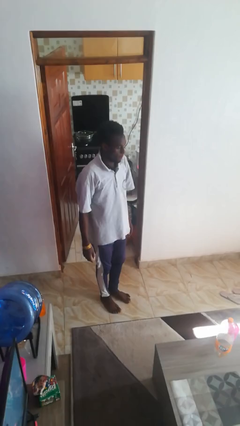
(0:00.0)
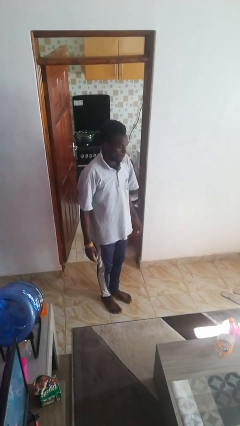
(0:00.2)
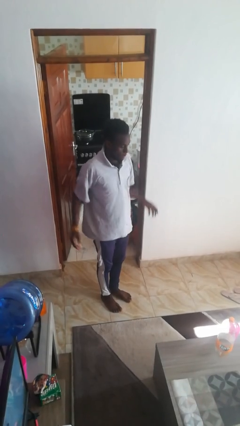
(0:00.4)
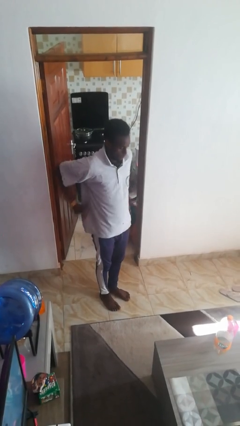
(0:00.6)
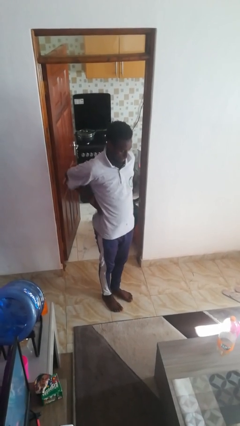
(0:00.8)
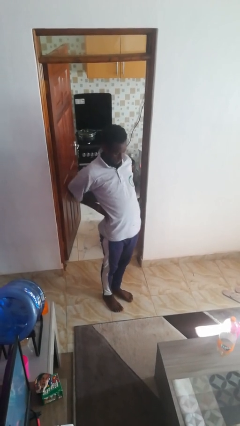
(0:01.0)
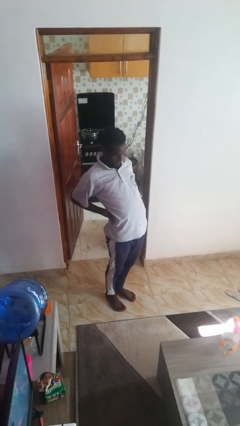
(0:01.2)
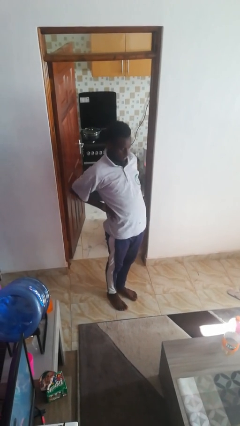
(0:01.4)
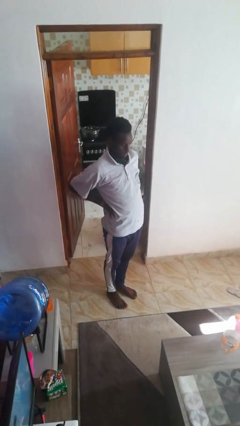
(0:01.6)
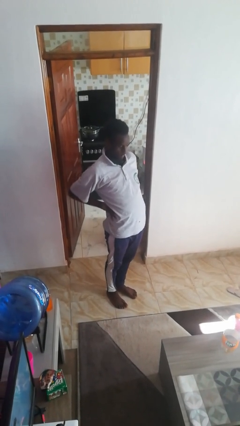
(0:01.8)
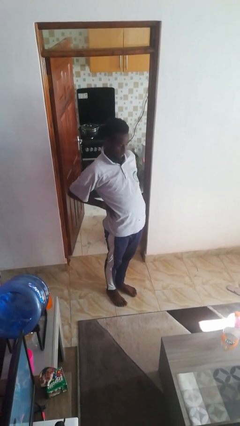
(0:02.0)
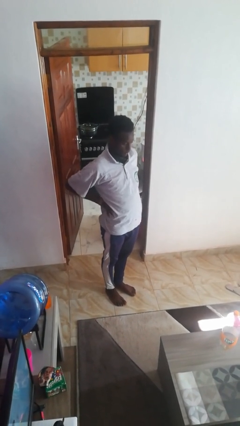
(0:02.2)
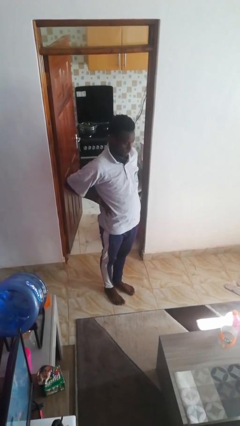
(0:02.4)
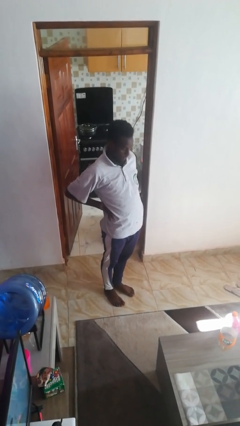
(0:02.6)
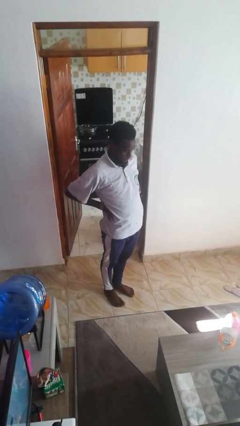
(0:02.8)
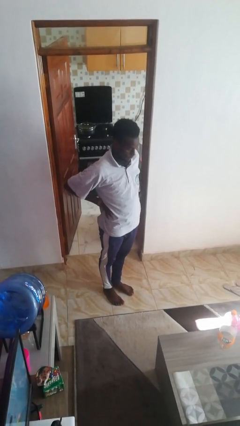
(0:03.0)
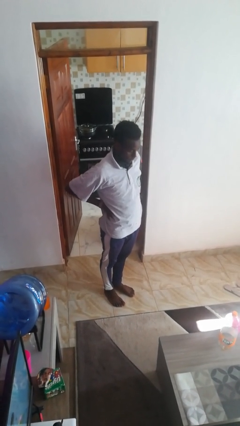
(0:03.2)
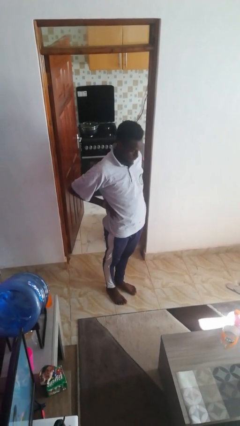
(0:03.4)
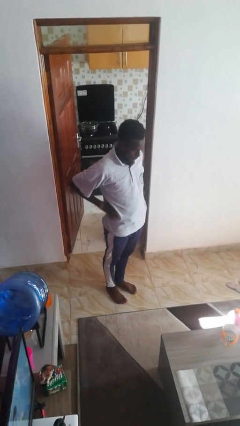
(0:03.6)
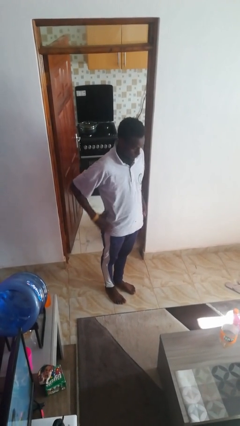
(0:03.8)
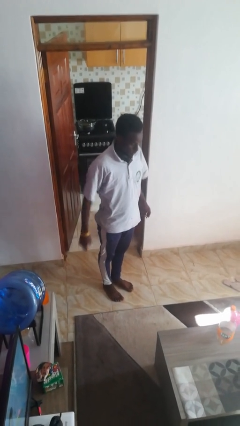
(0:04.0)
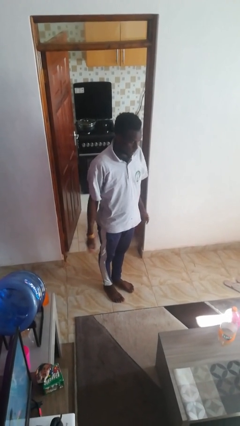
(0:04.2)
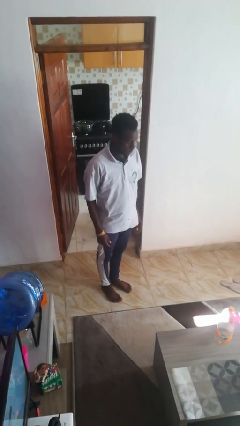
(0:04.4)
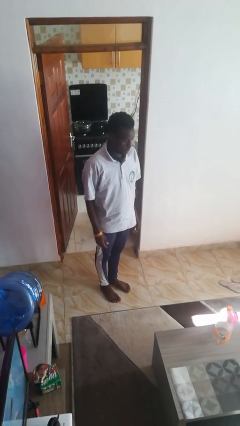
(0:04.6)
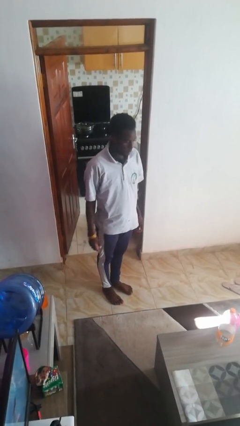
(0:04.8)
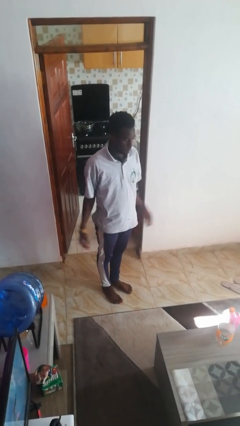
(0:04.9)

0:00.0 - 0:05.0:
person stretches back

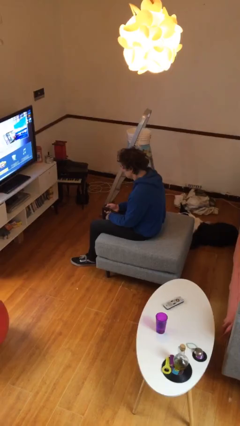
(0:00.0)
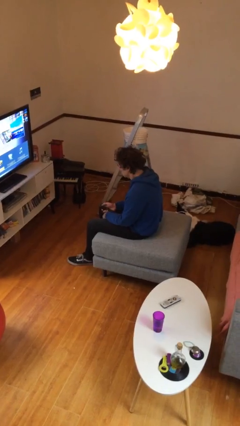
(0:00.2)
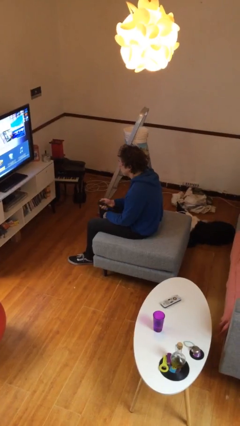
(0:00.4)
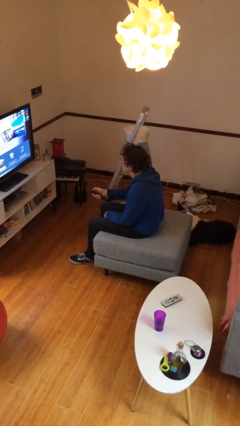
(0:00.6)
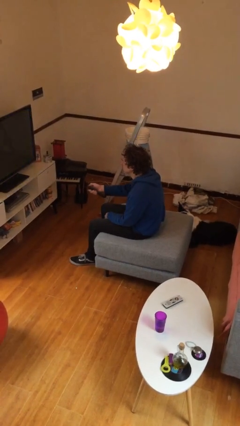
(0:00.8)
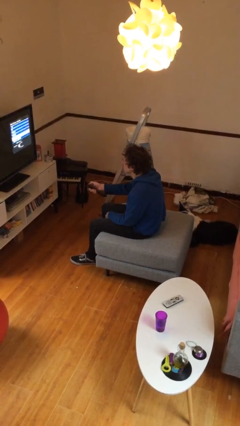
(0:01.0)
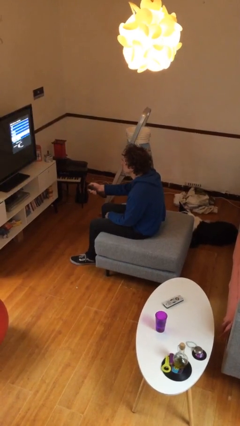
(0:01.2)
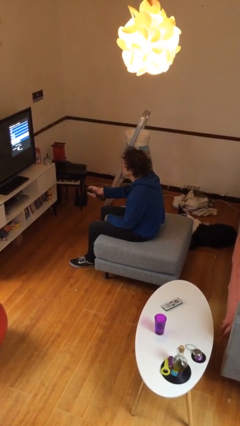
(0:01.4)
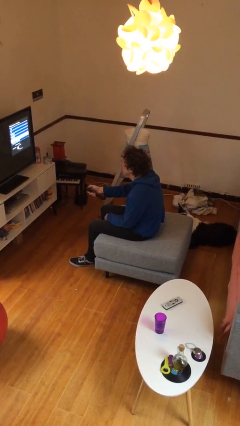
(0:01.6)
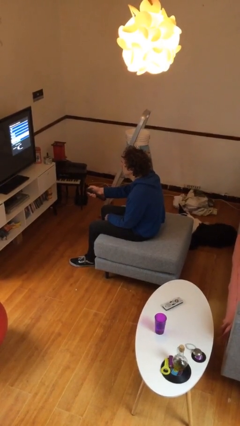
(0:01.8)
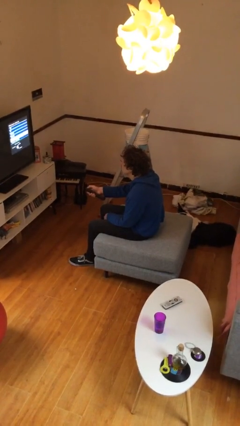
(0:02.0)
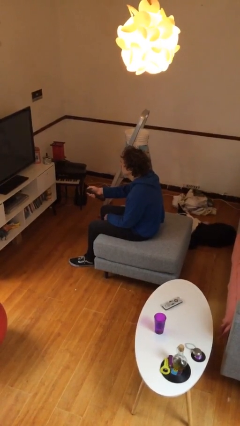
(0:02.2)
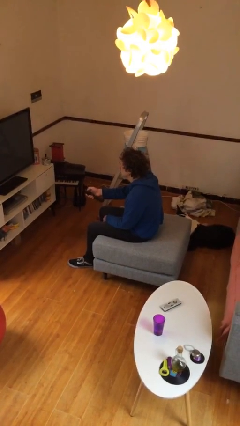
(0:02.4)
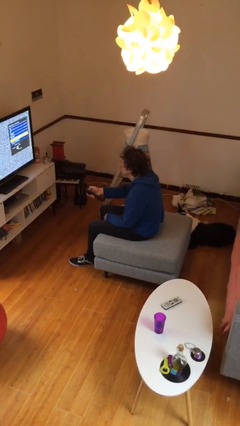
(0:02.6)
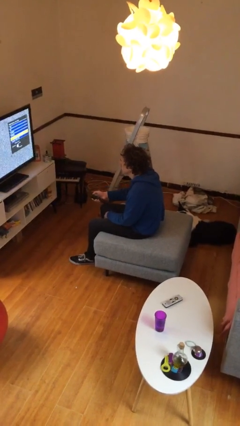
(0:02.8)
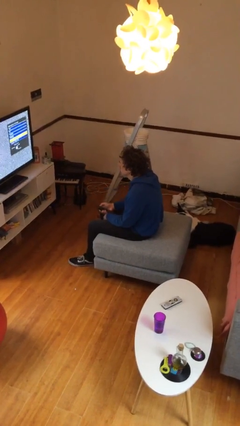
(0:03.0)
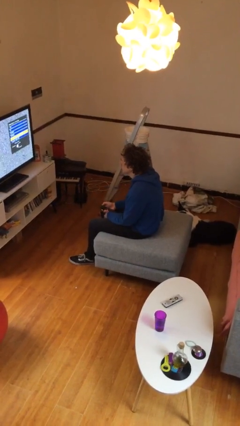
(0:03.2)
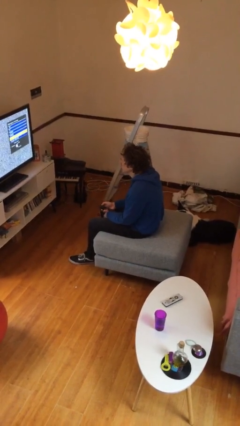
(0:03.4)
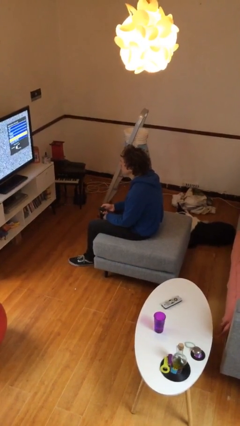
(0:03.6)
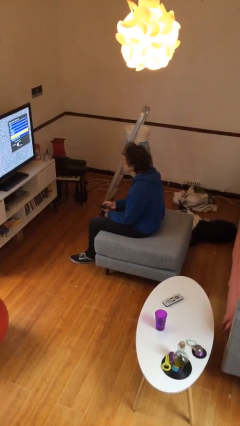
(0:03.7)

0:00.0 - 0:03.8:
person uses television remote

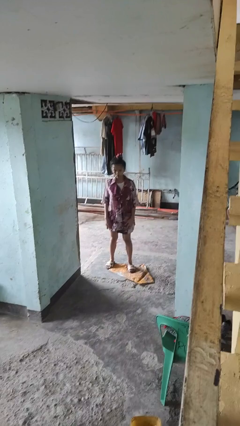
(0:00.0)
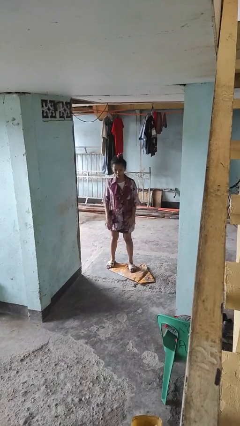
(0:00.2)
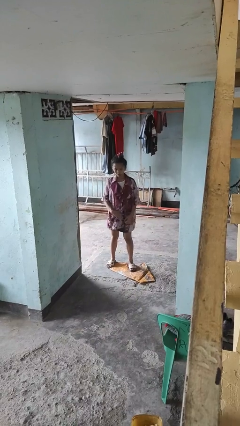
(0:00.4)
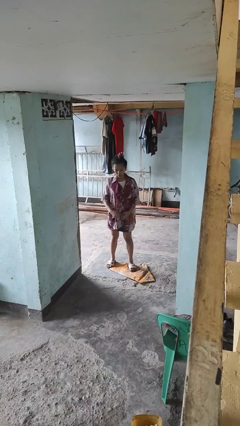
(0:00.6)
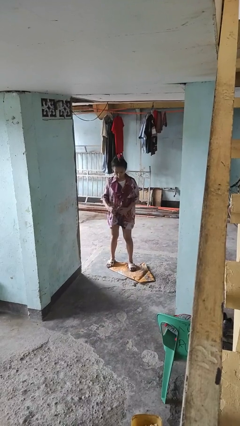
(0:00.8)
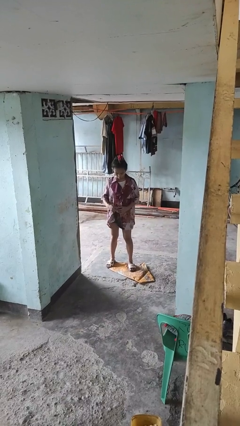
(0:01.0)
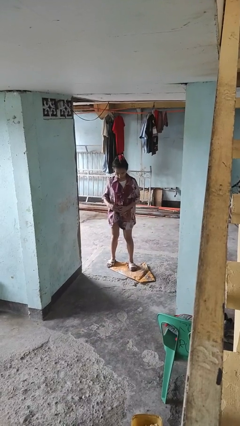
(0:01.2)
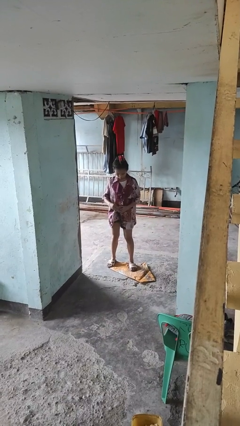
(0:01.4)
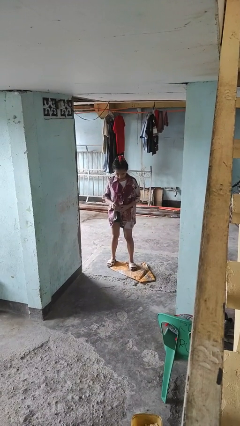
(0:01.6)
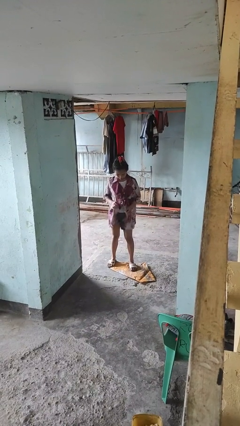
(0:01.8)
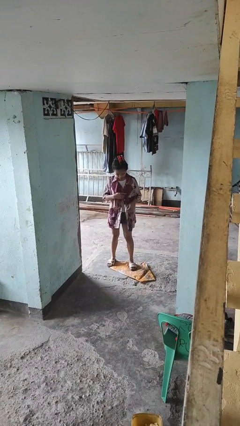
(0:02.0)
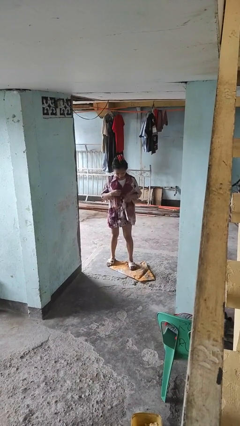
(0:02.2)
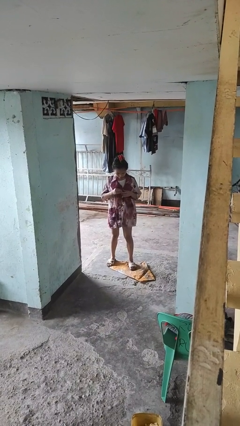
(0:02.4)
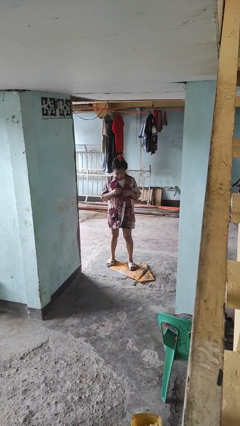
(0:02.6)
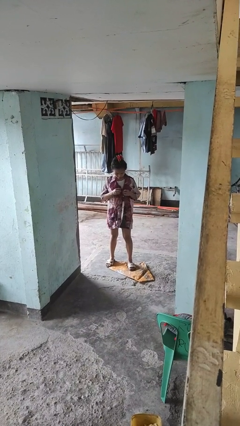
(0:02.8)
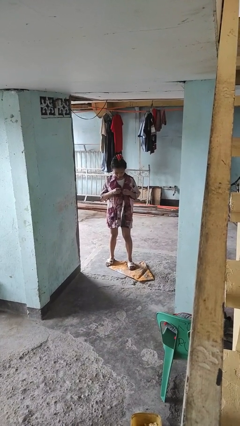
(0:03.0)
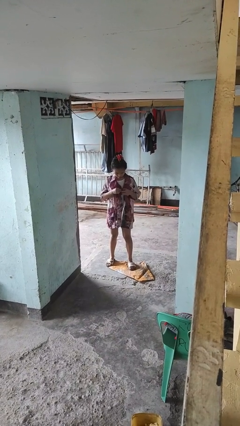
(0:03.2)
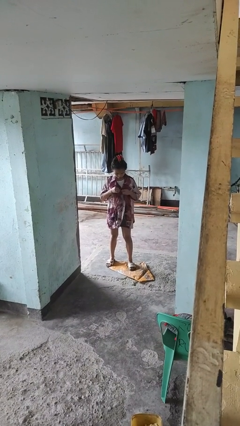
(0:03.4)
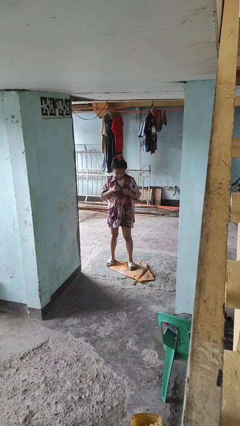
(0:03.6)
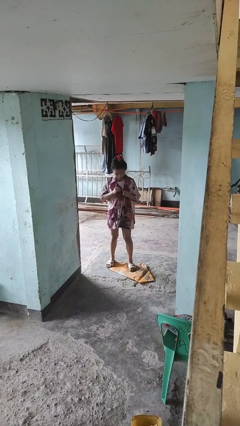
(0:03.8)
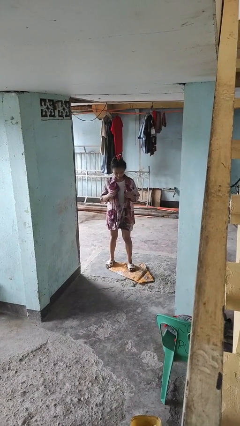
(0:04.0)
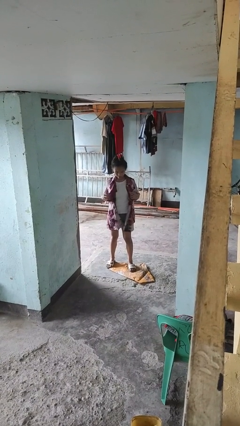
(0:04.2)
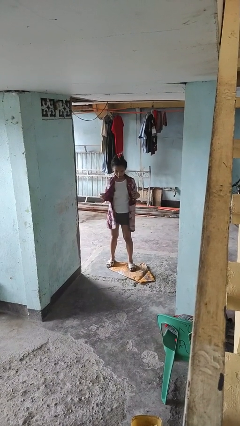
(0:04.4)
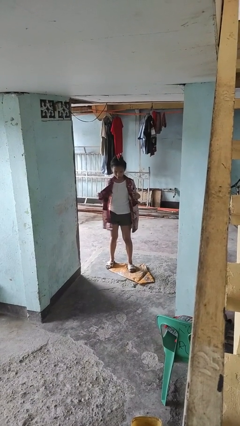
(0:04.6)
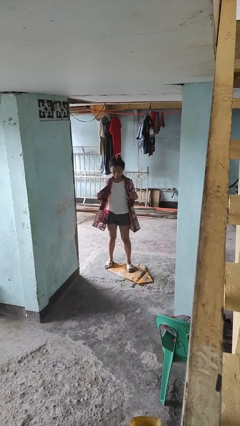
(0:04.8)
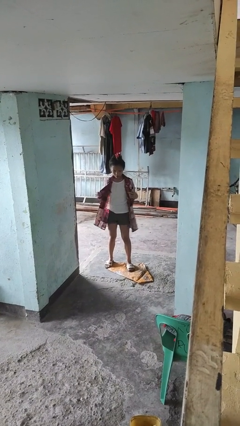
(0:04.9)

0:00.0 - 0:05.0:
person unbuttons shirt

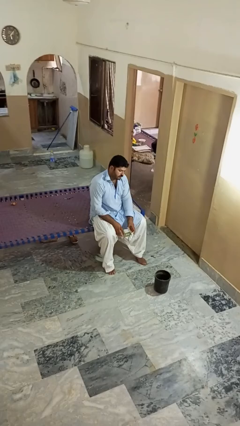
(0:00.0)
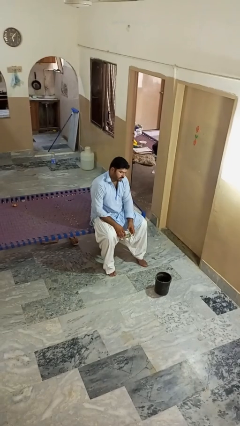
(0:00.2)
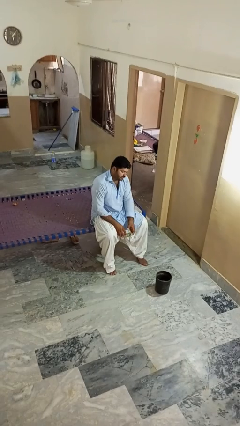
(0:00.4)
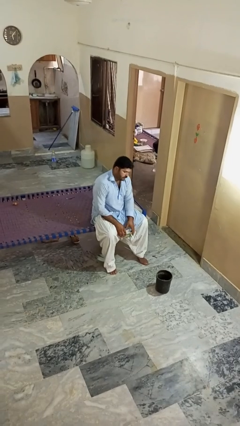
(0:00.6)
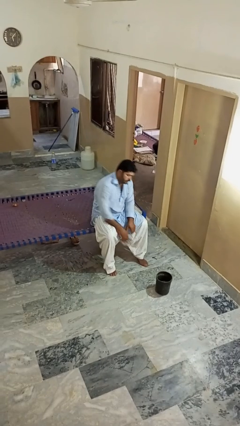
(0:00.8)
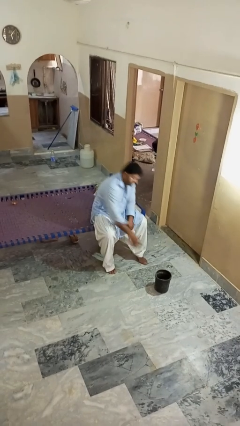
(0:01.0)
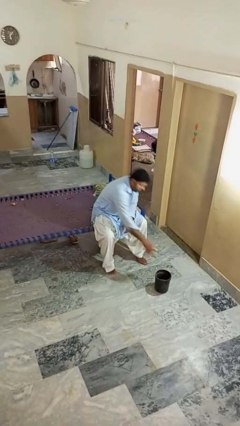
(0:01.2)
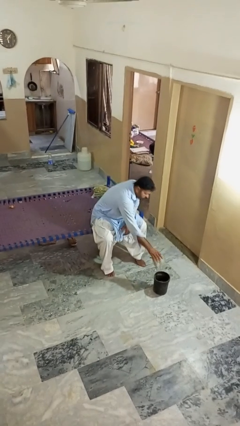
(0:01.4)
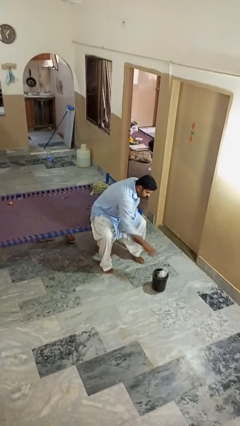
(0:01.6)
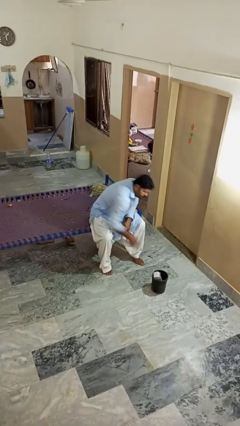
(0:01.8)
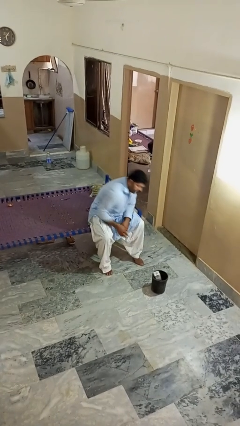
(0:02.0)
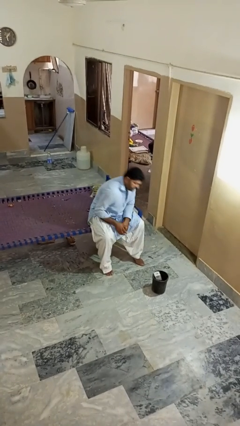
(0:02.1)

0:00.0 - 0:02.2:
person puts object into basket

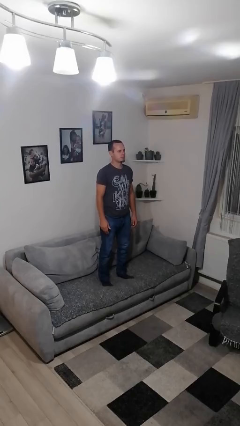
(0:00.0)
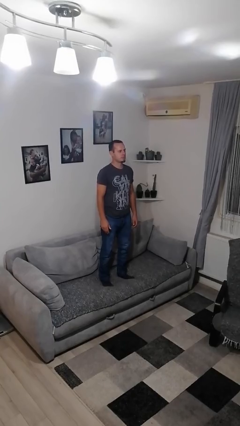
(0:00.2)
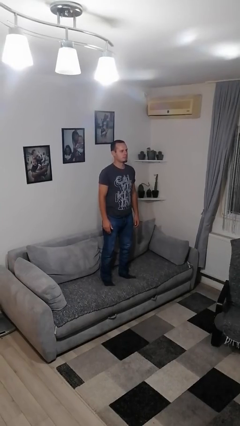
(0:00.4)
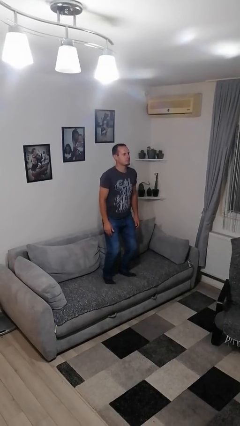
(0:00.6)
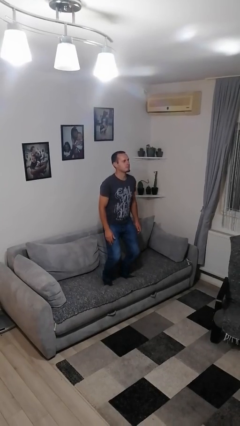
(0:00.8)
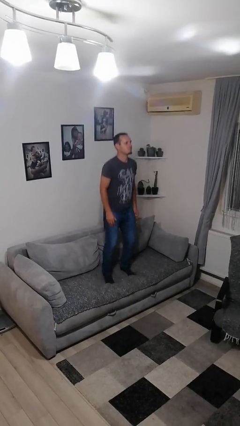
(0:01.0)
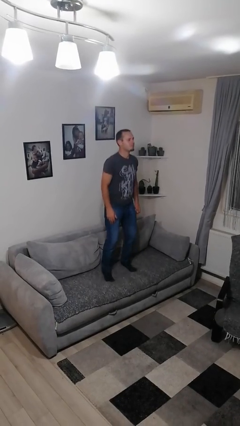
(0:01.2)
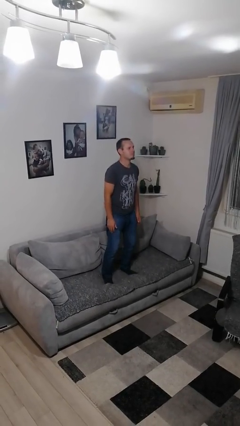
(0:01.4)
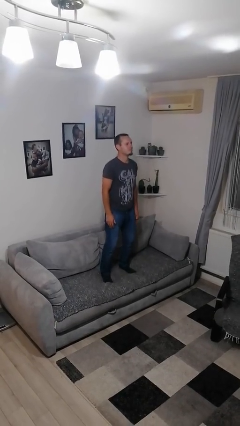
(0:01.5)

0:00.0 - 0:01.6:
person jumps on couch
